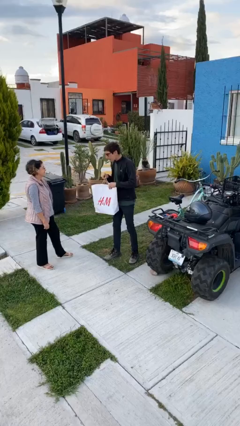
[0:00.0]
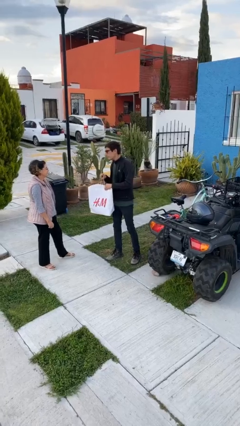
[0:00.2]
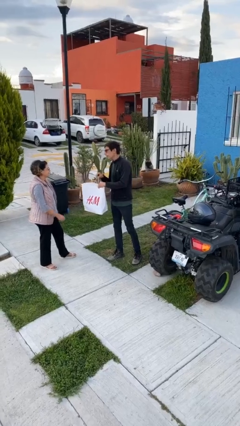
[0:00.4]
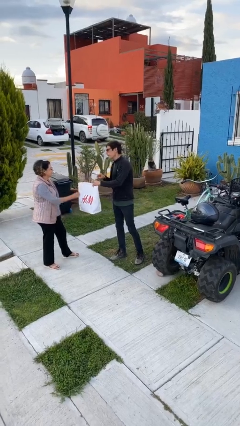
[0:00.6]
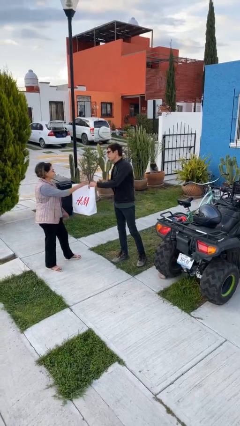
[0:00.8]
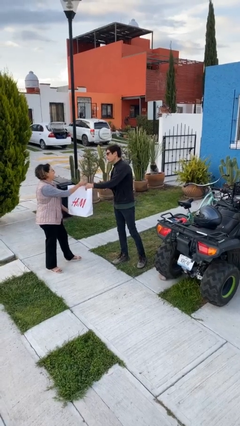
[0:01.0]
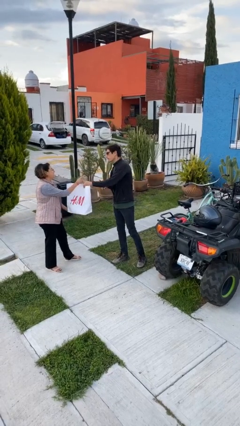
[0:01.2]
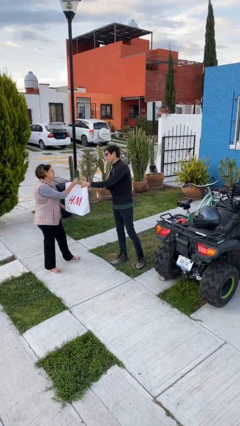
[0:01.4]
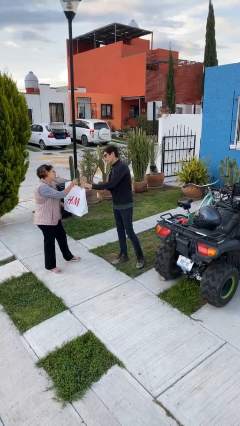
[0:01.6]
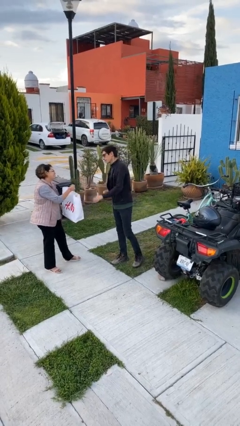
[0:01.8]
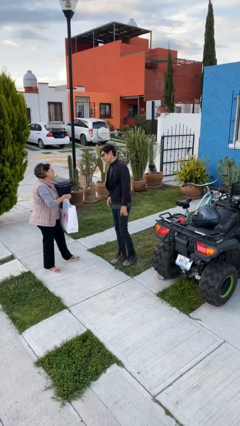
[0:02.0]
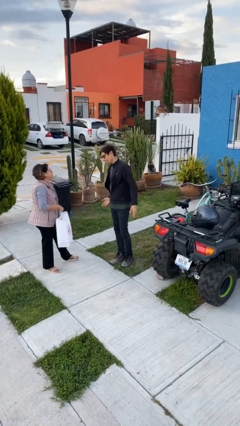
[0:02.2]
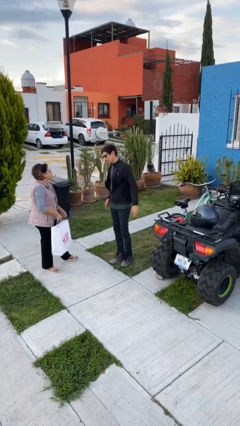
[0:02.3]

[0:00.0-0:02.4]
person transfers object to person

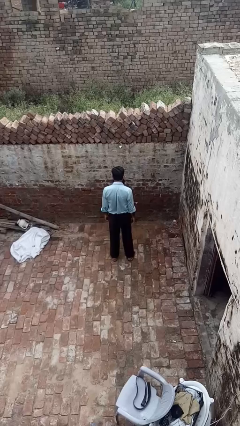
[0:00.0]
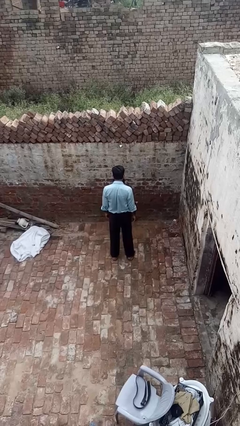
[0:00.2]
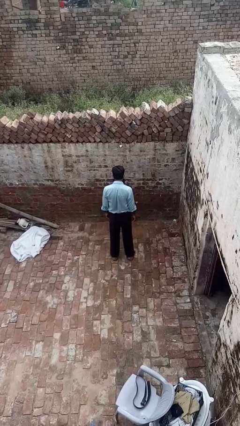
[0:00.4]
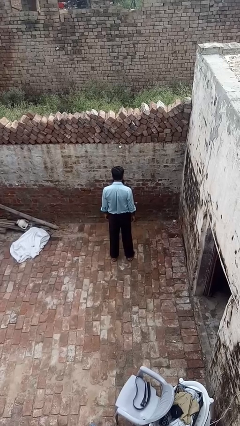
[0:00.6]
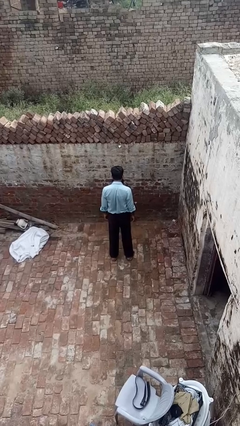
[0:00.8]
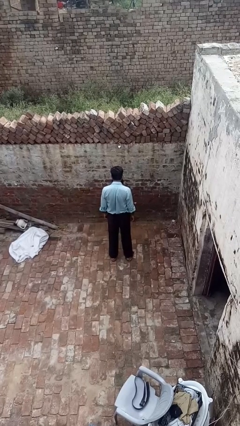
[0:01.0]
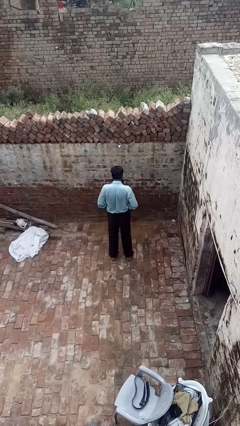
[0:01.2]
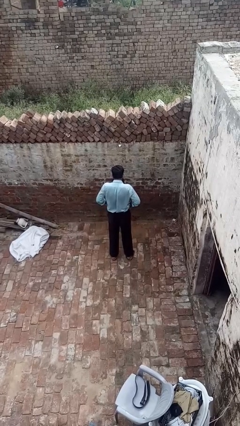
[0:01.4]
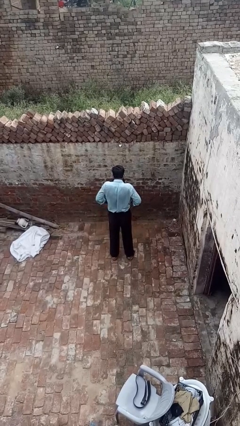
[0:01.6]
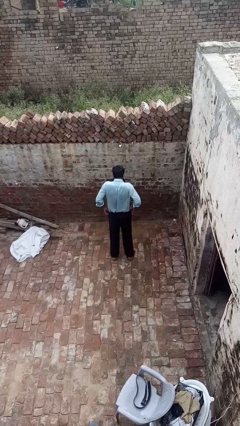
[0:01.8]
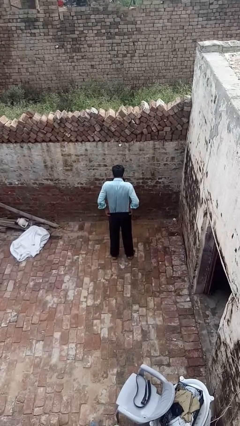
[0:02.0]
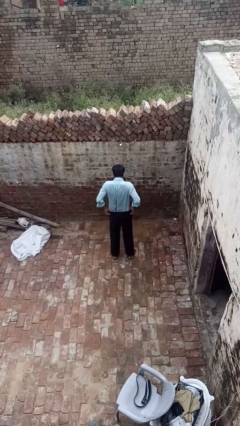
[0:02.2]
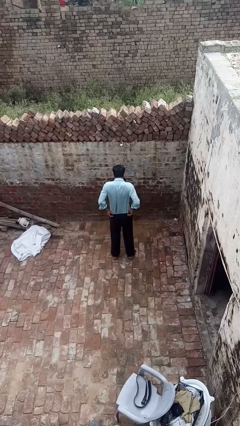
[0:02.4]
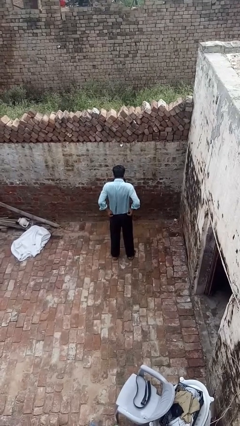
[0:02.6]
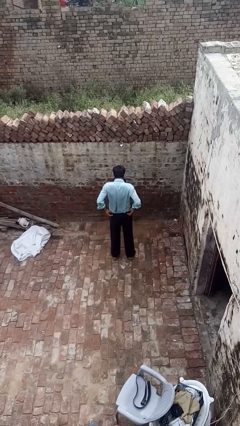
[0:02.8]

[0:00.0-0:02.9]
person hikes up pants

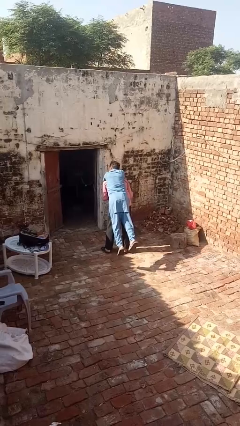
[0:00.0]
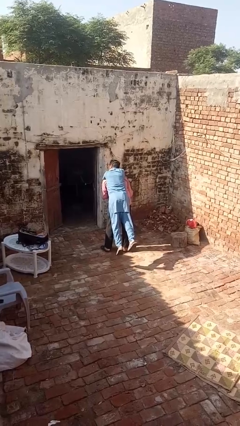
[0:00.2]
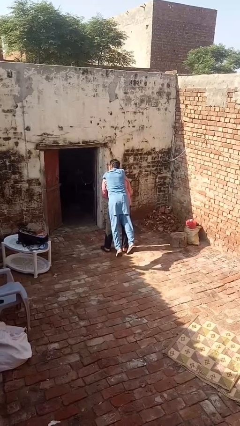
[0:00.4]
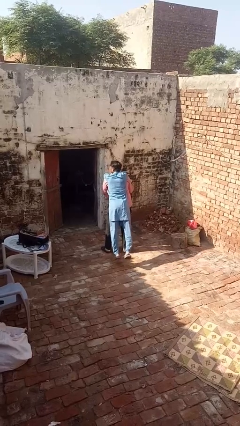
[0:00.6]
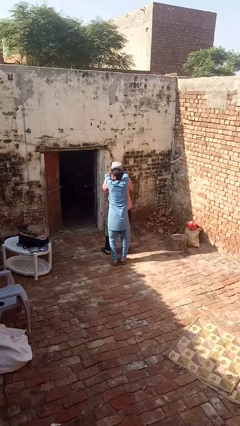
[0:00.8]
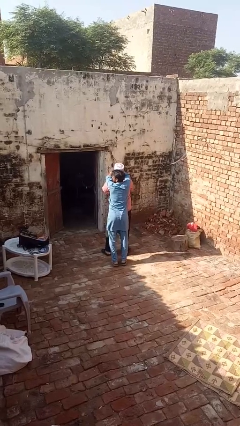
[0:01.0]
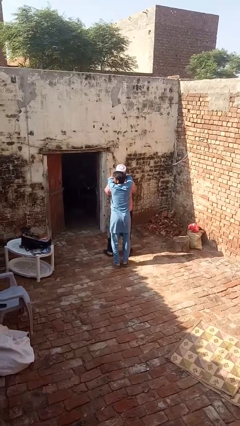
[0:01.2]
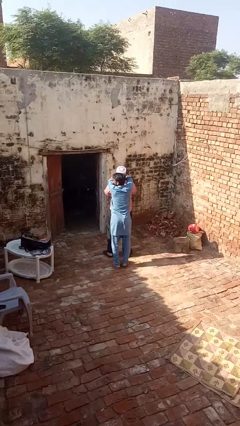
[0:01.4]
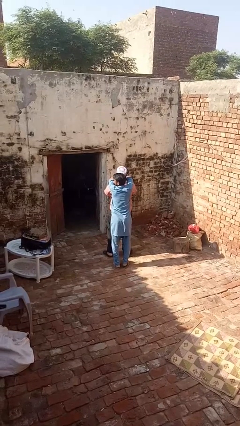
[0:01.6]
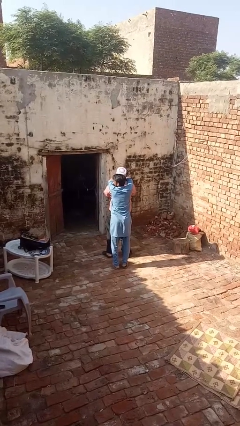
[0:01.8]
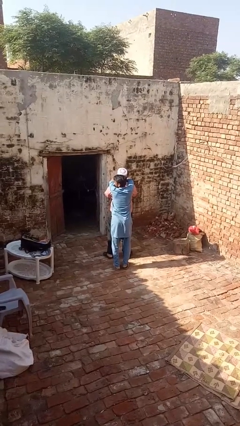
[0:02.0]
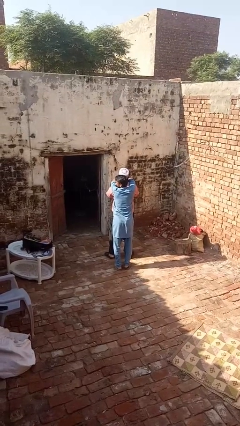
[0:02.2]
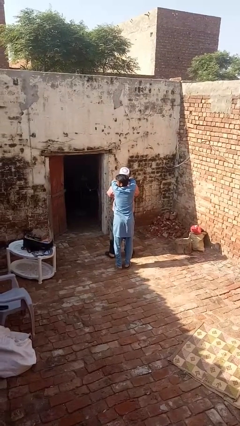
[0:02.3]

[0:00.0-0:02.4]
person puts down person

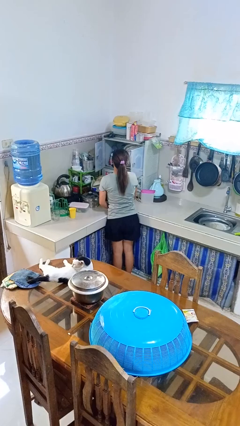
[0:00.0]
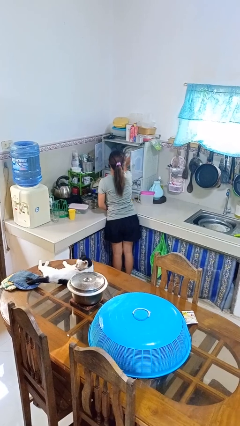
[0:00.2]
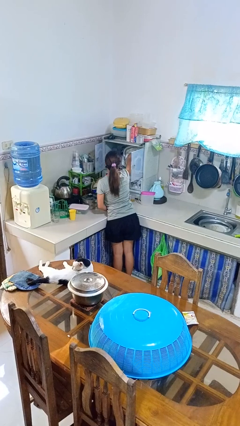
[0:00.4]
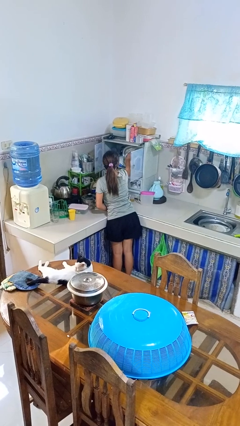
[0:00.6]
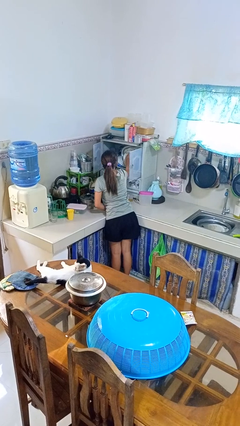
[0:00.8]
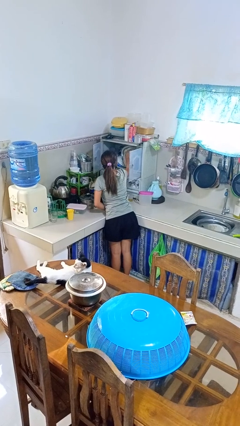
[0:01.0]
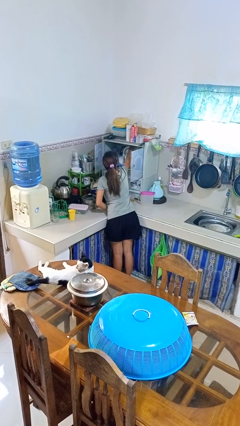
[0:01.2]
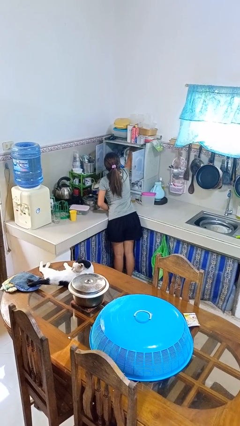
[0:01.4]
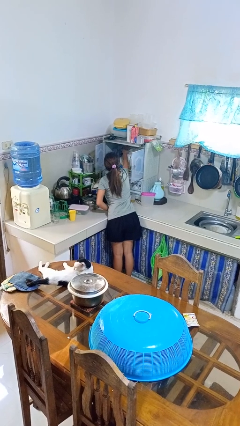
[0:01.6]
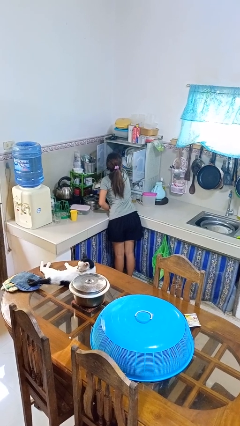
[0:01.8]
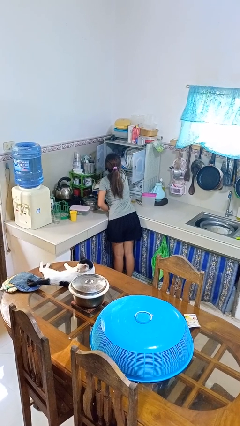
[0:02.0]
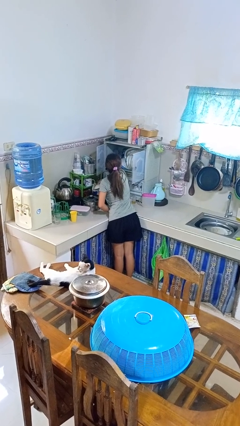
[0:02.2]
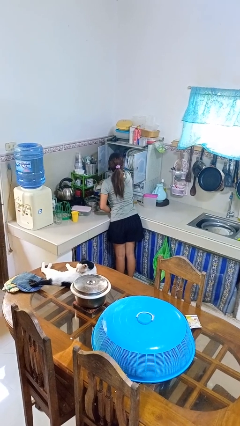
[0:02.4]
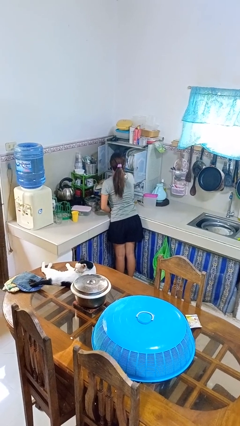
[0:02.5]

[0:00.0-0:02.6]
person searches in kitchen drawer

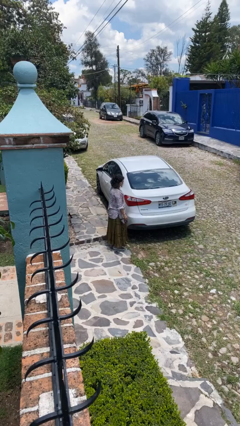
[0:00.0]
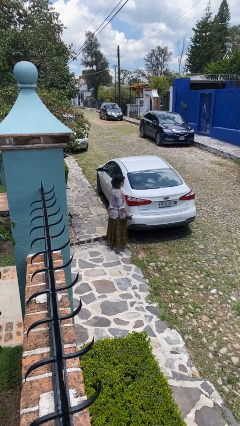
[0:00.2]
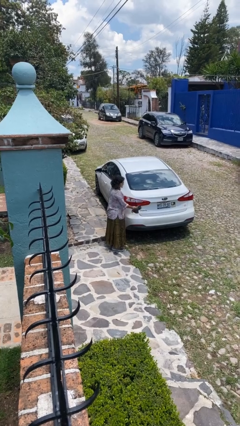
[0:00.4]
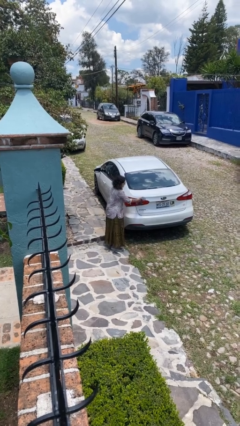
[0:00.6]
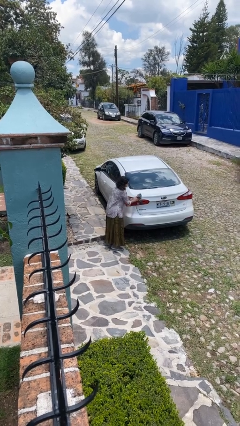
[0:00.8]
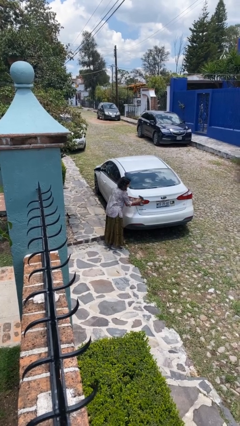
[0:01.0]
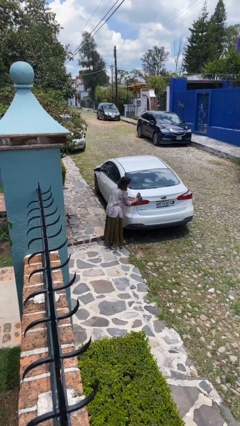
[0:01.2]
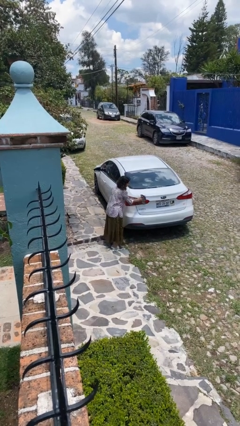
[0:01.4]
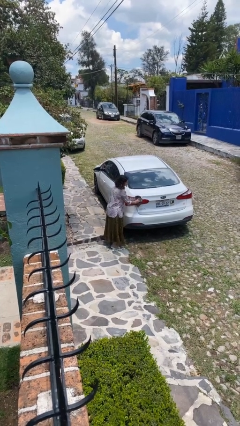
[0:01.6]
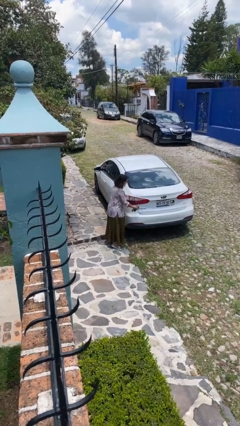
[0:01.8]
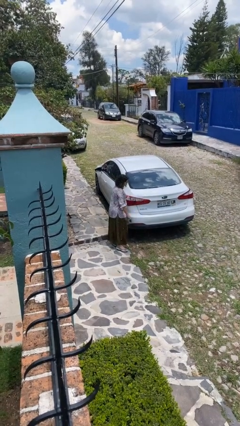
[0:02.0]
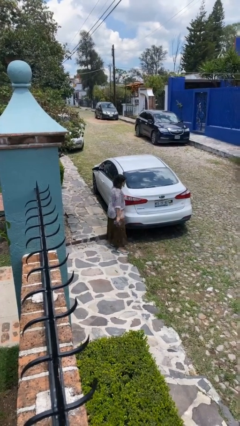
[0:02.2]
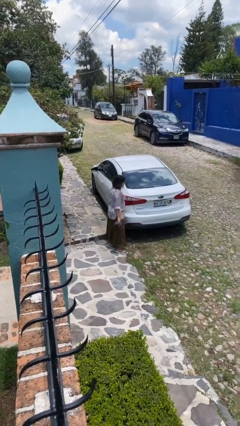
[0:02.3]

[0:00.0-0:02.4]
person polishes car with rag

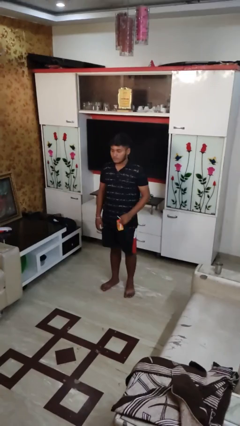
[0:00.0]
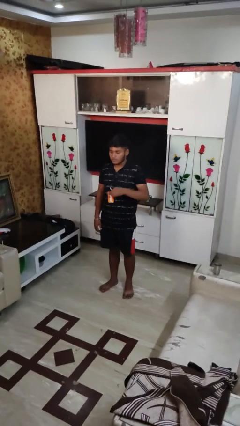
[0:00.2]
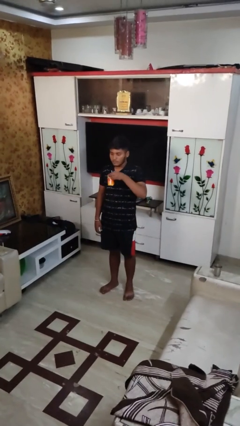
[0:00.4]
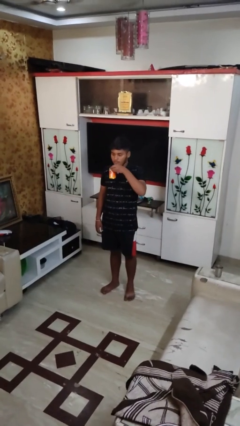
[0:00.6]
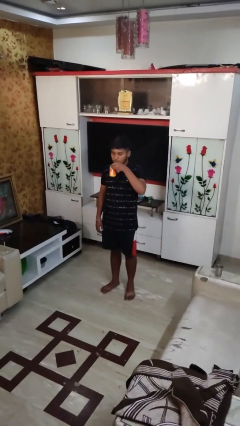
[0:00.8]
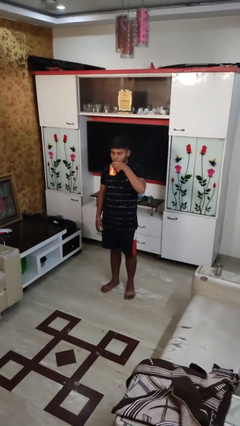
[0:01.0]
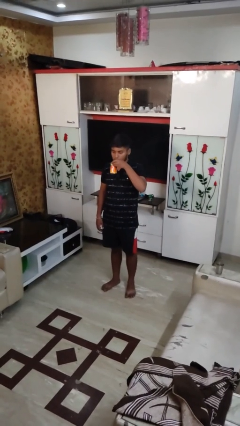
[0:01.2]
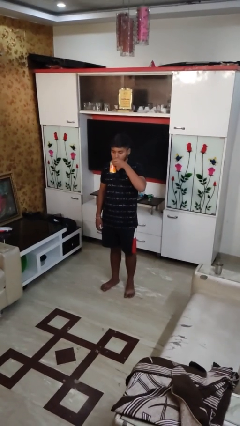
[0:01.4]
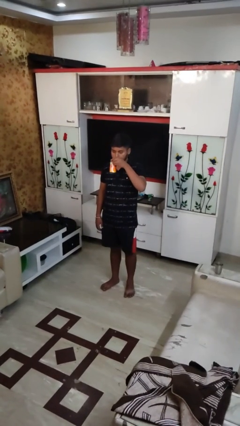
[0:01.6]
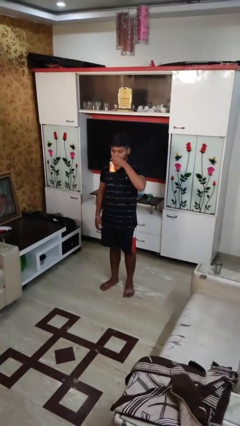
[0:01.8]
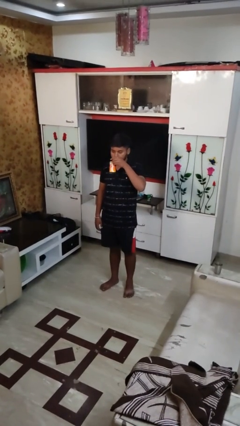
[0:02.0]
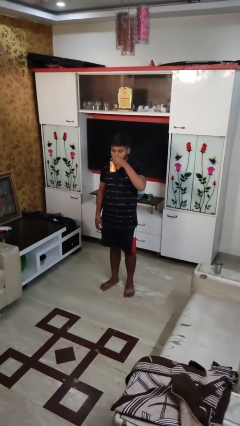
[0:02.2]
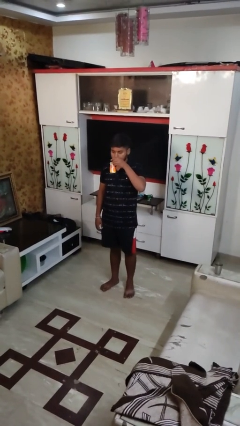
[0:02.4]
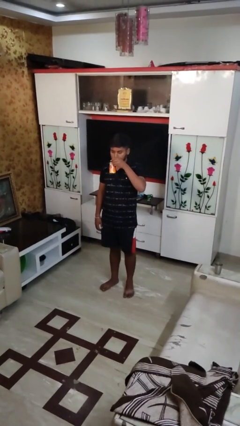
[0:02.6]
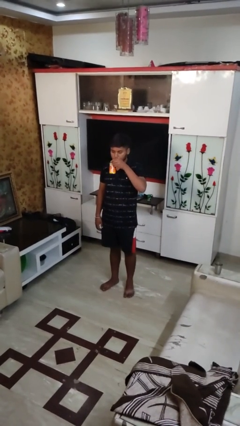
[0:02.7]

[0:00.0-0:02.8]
person drinks from straw

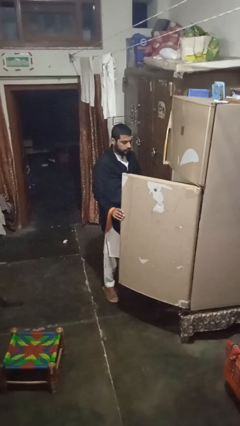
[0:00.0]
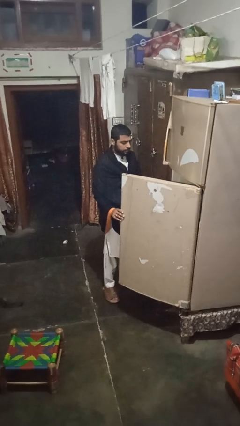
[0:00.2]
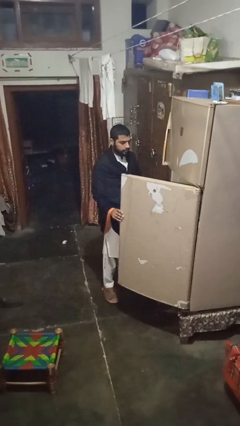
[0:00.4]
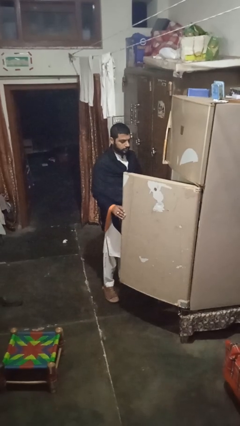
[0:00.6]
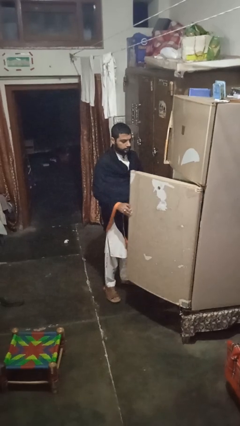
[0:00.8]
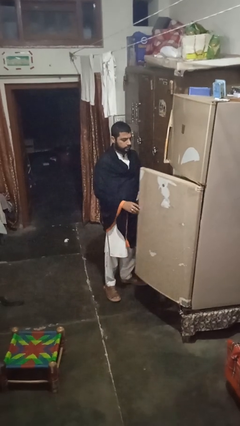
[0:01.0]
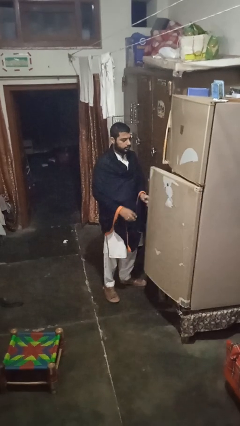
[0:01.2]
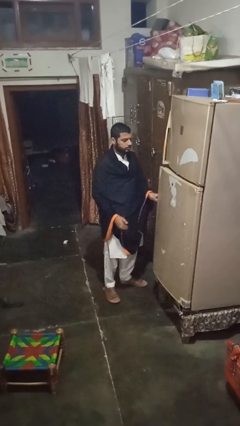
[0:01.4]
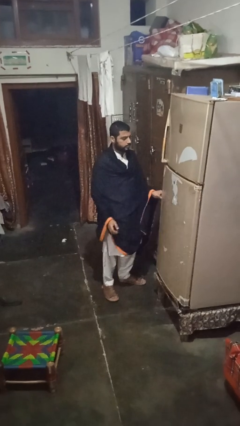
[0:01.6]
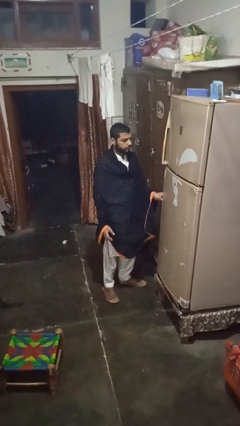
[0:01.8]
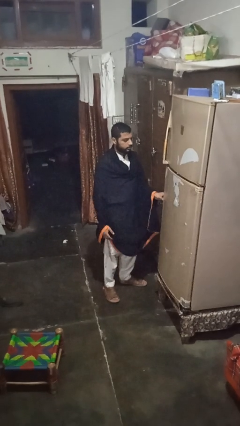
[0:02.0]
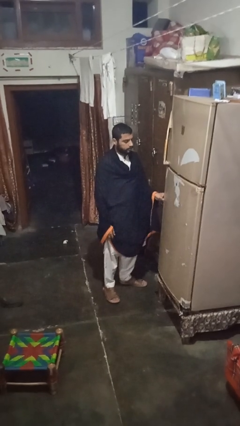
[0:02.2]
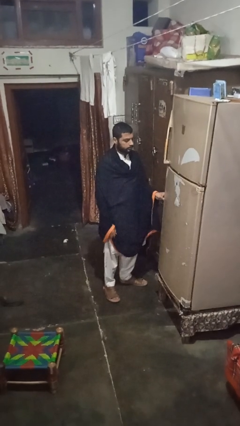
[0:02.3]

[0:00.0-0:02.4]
person closes refrigerator
